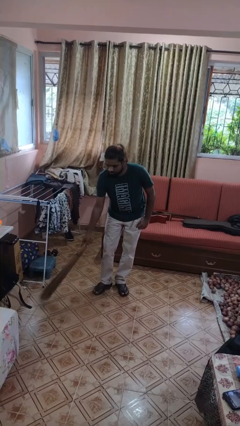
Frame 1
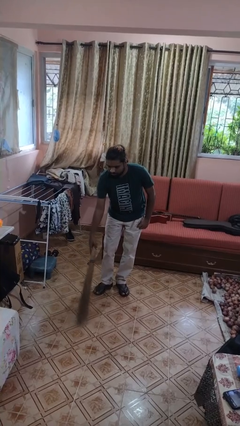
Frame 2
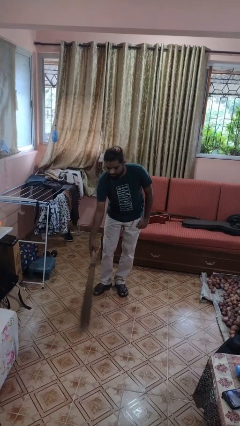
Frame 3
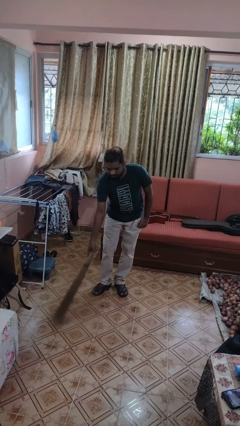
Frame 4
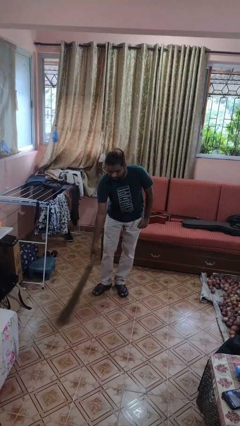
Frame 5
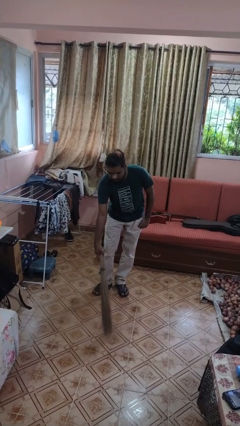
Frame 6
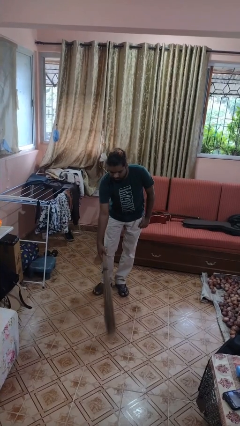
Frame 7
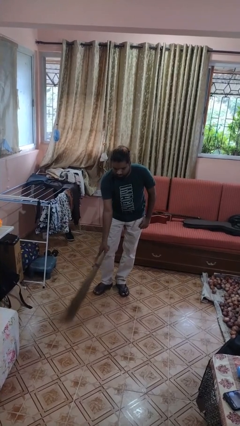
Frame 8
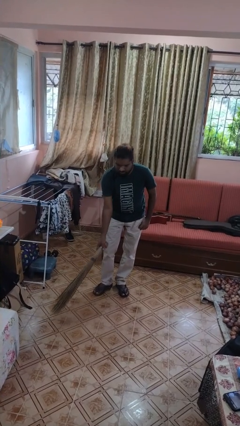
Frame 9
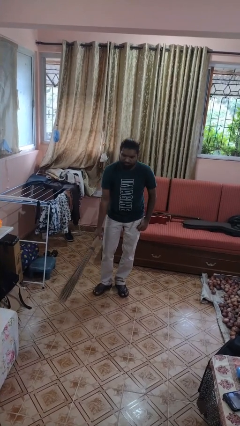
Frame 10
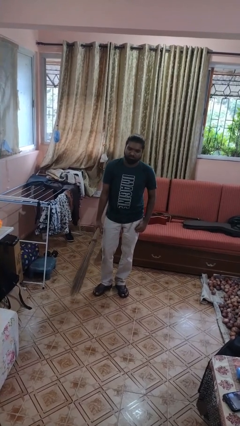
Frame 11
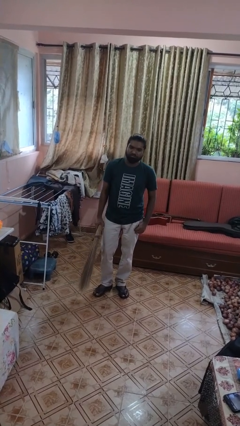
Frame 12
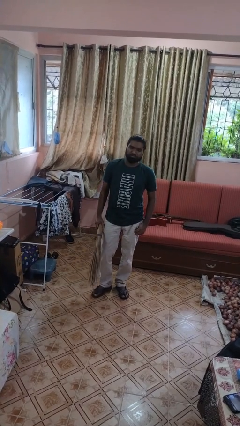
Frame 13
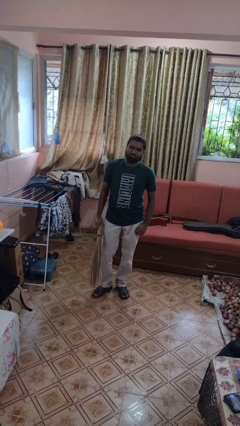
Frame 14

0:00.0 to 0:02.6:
person sweeps floor

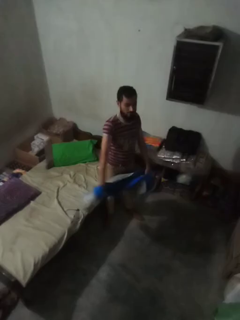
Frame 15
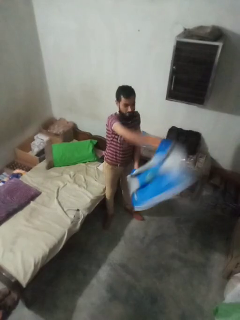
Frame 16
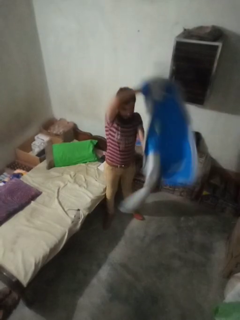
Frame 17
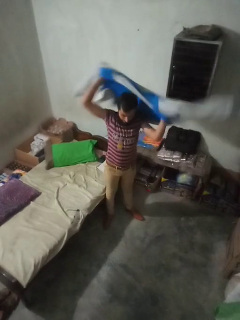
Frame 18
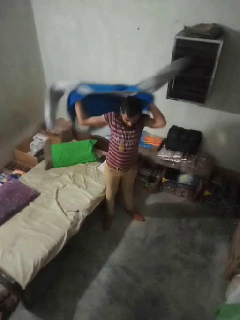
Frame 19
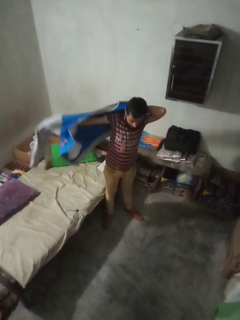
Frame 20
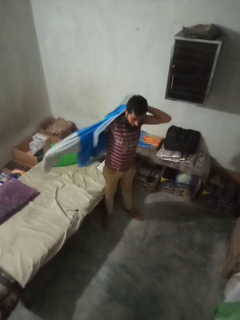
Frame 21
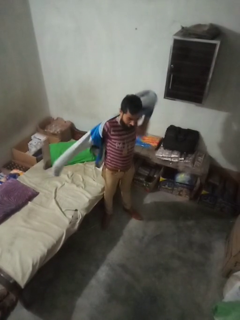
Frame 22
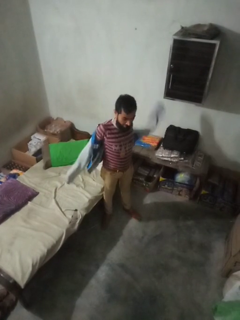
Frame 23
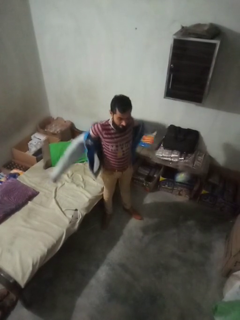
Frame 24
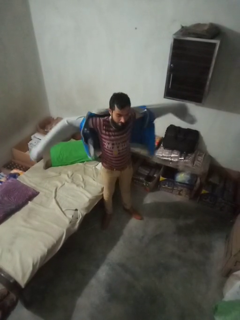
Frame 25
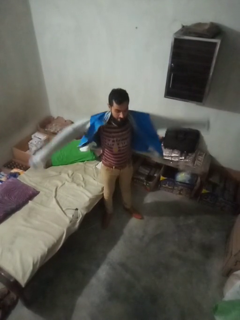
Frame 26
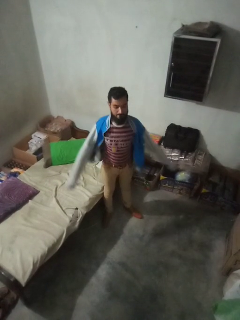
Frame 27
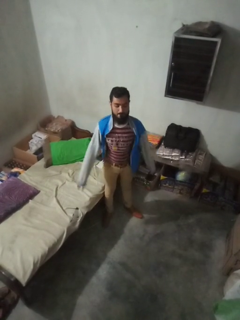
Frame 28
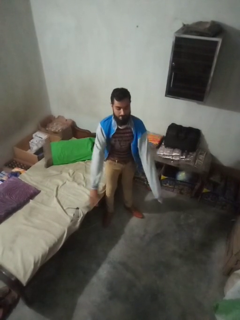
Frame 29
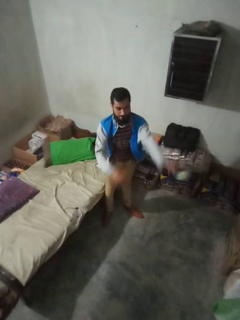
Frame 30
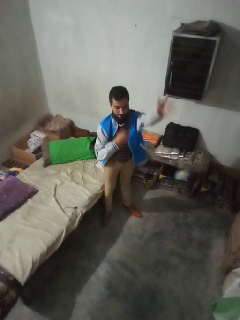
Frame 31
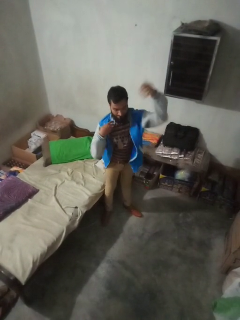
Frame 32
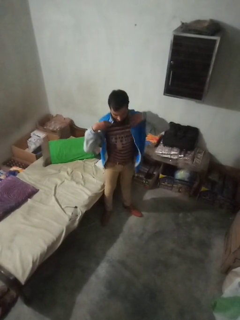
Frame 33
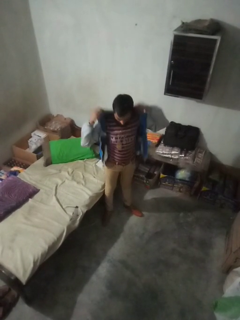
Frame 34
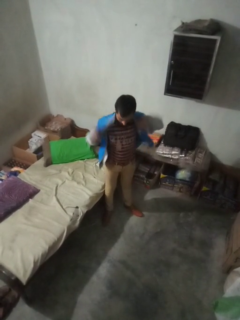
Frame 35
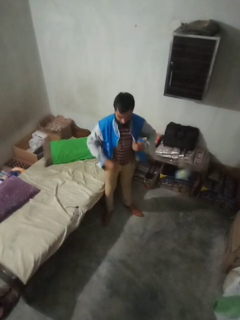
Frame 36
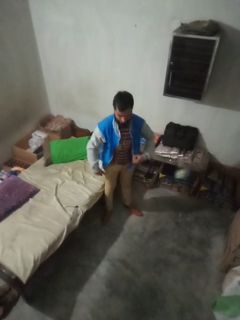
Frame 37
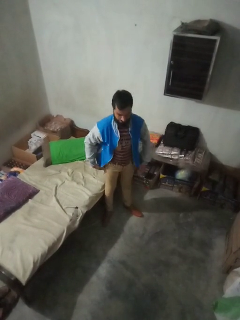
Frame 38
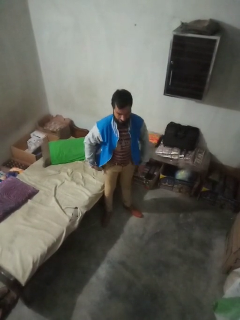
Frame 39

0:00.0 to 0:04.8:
person puts on jacket

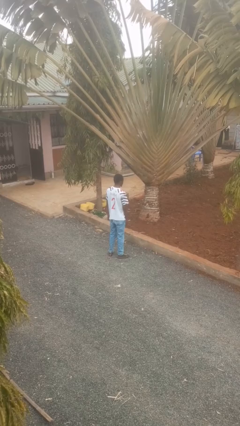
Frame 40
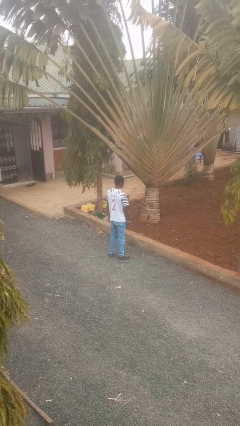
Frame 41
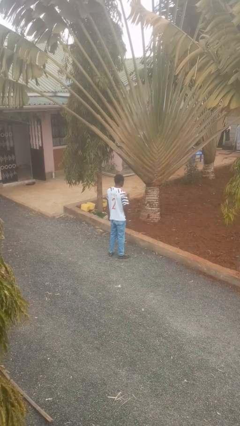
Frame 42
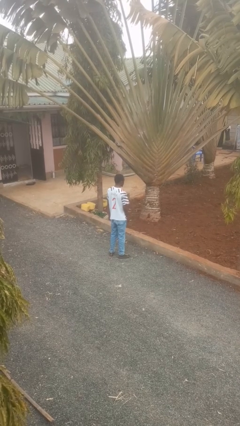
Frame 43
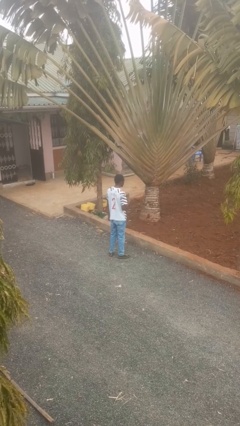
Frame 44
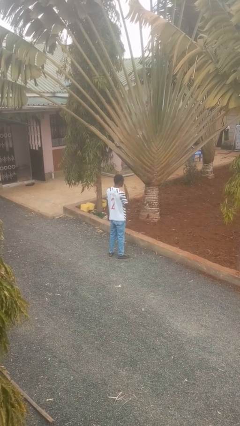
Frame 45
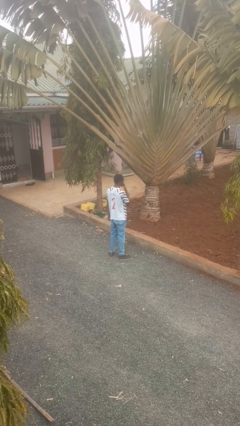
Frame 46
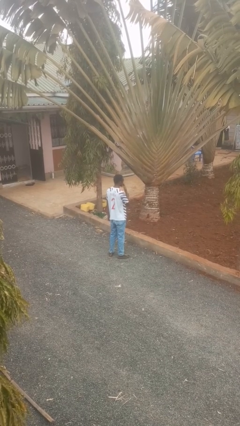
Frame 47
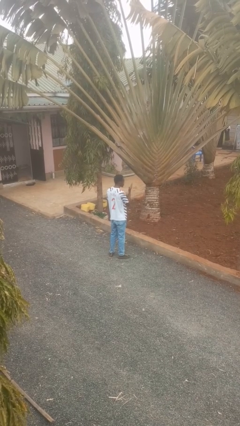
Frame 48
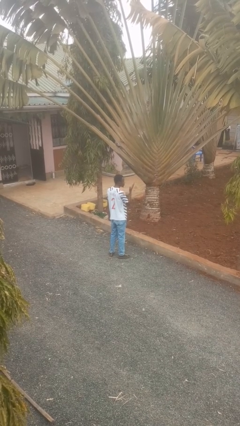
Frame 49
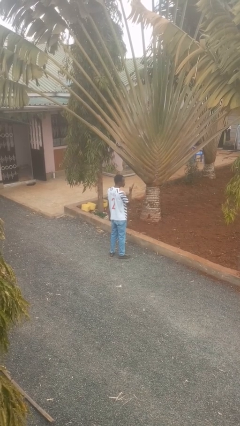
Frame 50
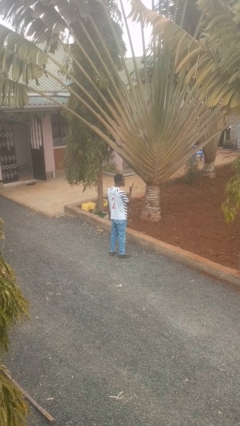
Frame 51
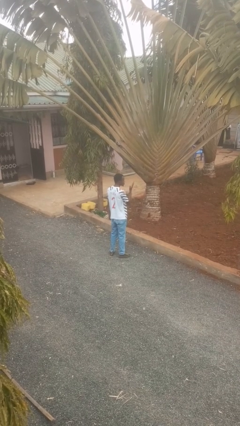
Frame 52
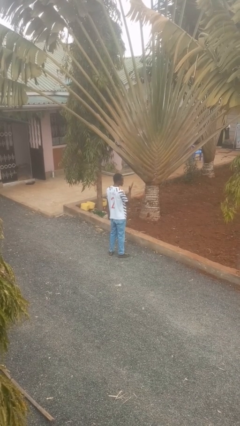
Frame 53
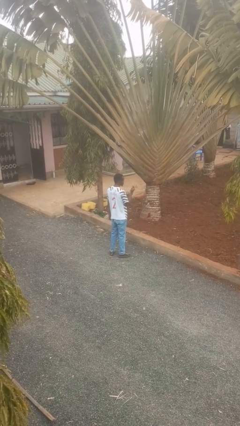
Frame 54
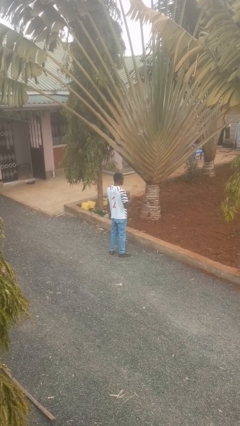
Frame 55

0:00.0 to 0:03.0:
person gestures blow kiss

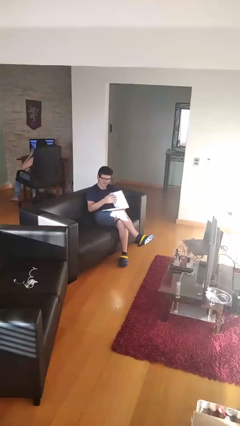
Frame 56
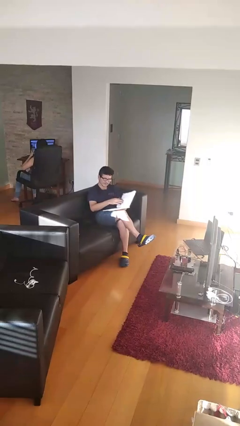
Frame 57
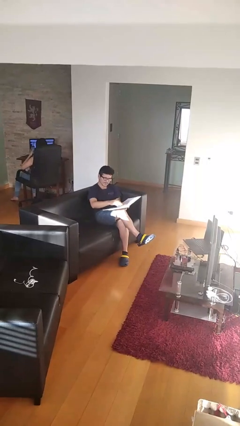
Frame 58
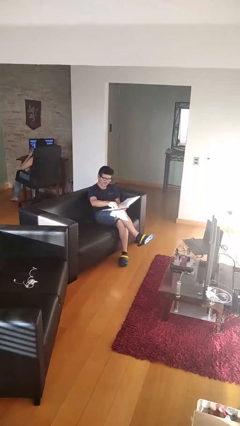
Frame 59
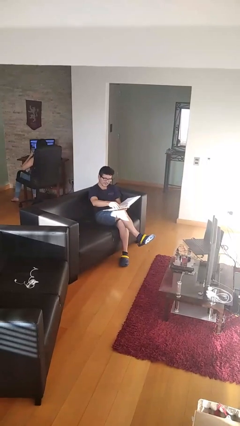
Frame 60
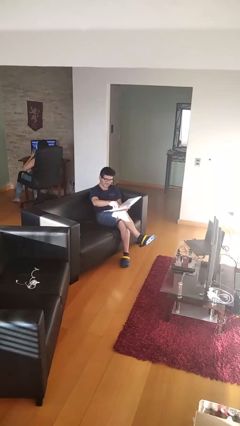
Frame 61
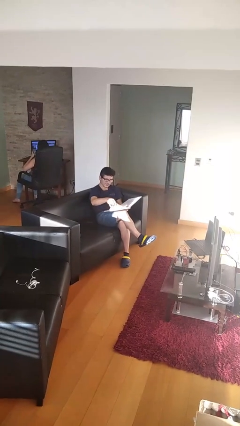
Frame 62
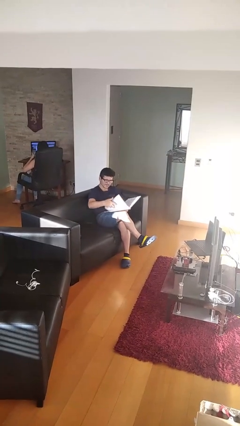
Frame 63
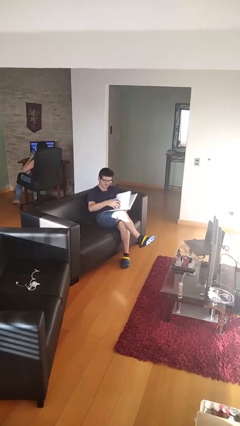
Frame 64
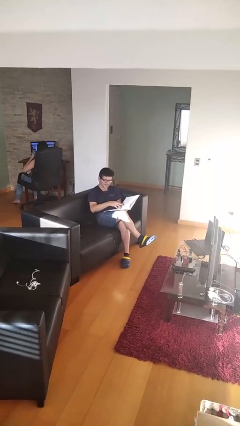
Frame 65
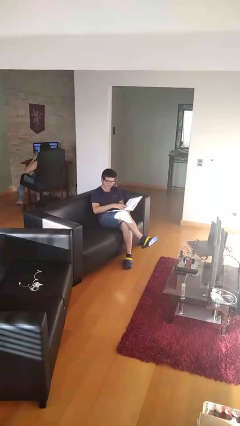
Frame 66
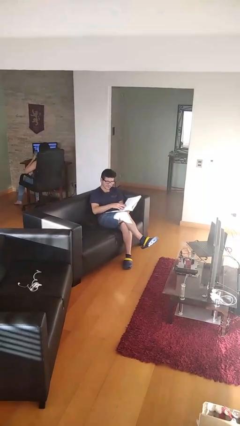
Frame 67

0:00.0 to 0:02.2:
person reads document

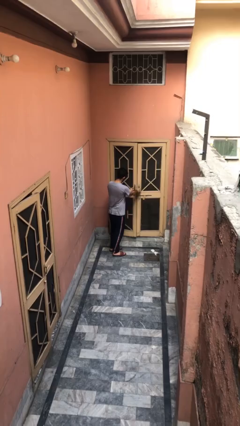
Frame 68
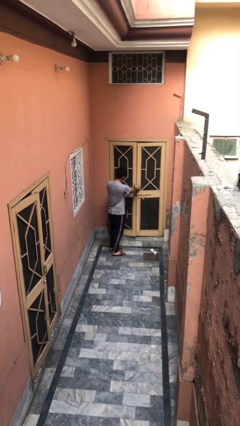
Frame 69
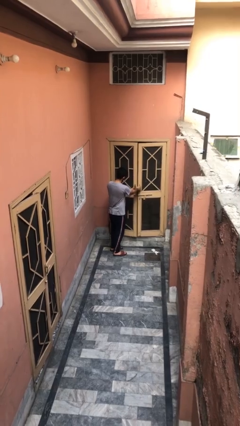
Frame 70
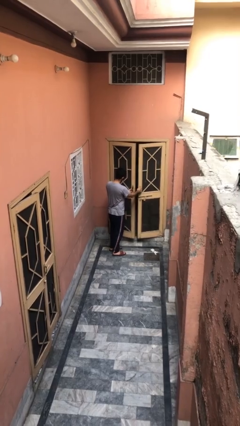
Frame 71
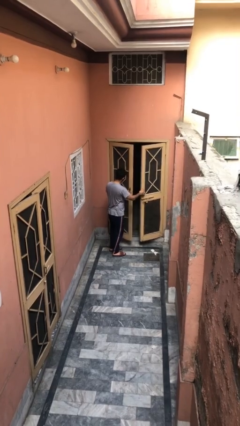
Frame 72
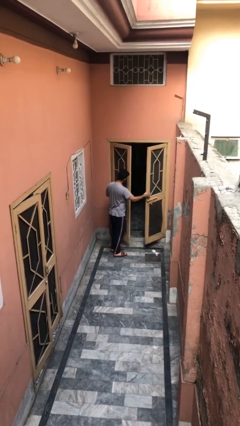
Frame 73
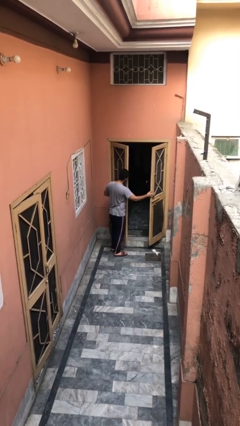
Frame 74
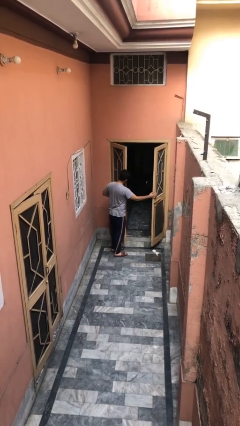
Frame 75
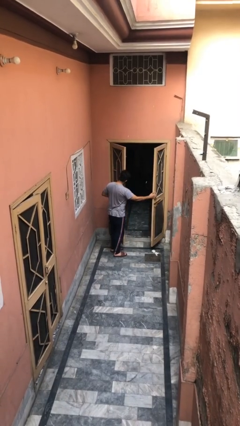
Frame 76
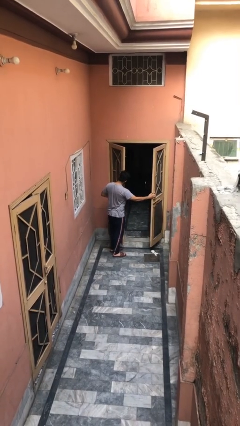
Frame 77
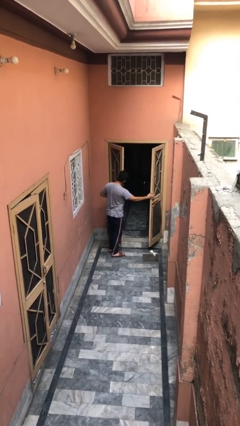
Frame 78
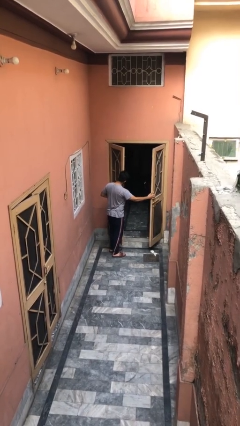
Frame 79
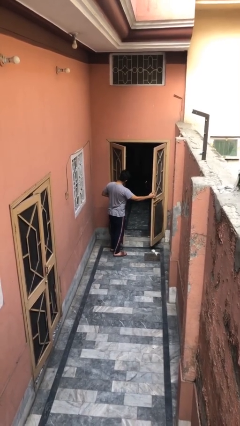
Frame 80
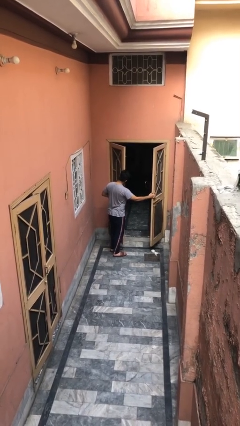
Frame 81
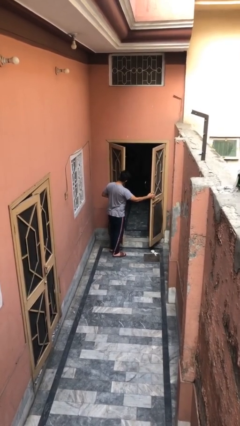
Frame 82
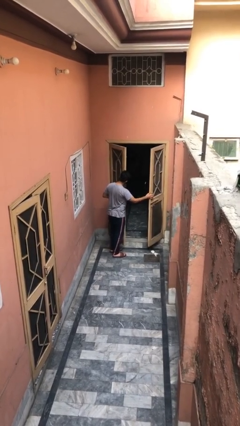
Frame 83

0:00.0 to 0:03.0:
person opens gate

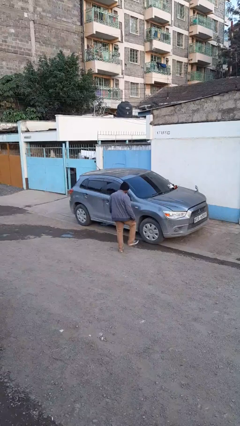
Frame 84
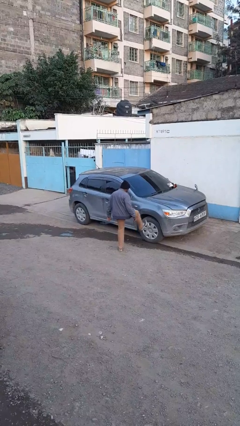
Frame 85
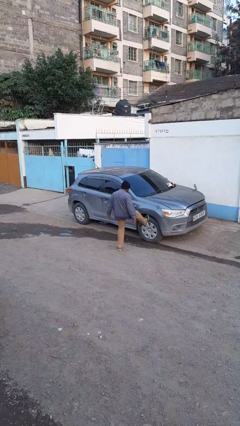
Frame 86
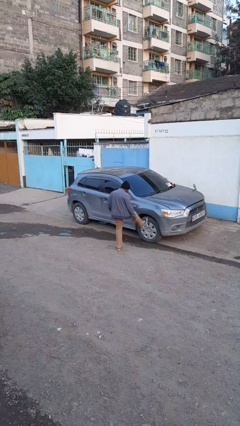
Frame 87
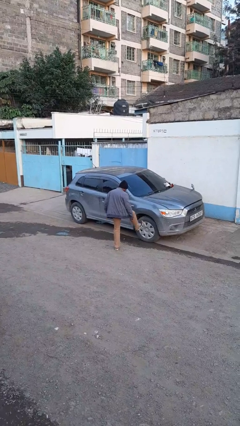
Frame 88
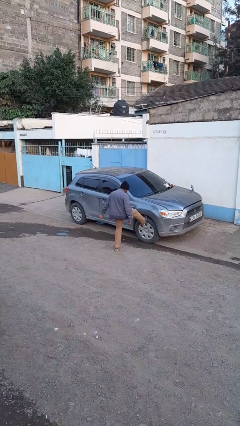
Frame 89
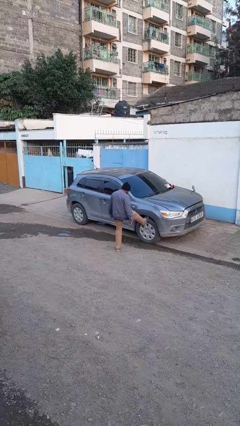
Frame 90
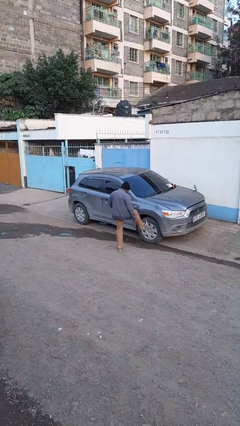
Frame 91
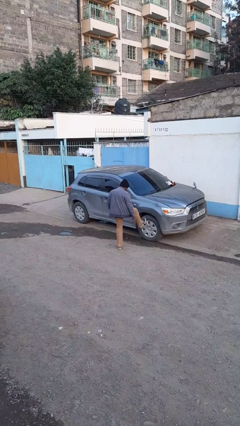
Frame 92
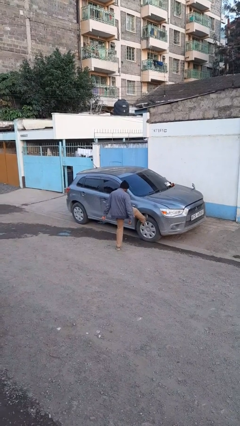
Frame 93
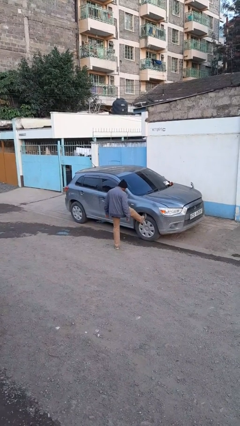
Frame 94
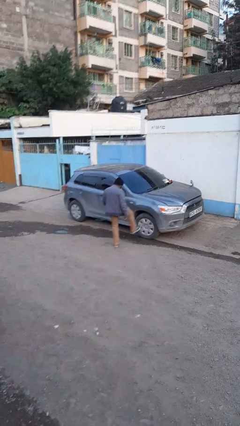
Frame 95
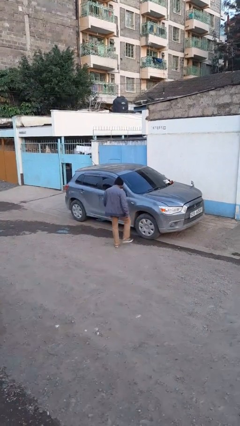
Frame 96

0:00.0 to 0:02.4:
person kicks car tires

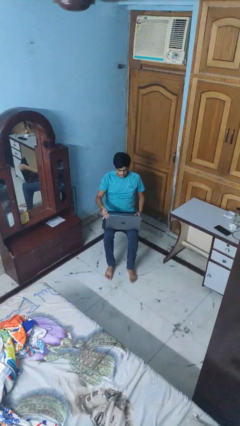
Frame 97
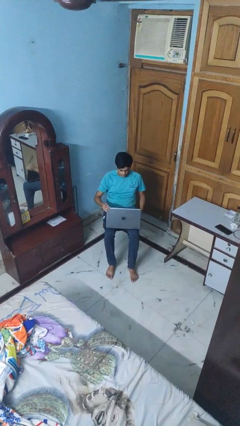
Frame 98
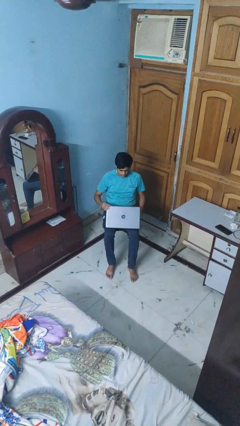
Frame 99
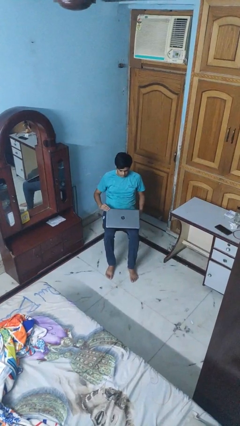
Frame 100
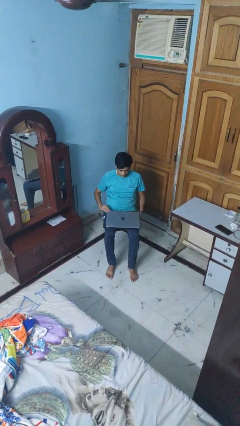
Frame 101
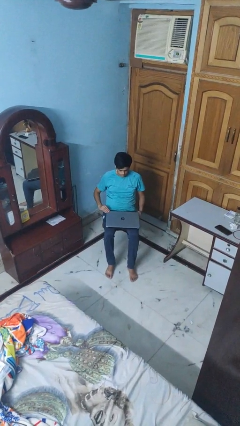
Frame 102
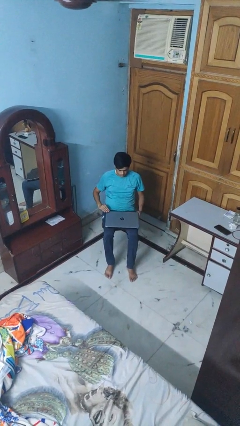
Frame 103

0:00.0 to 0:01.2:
person closes laptop
